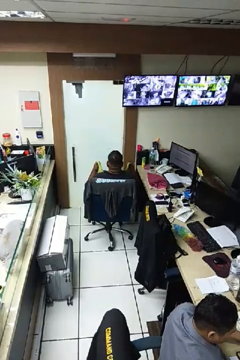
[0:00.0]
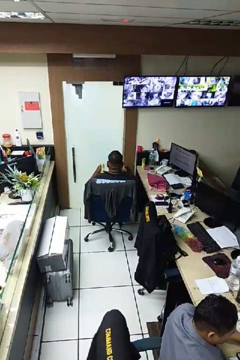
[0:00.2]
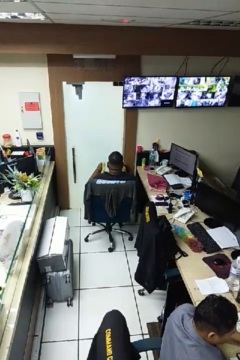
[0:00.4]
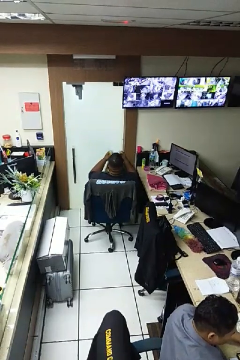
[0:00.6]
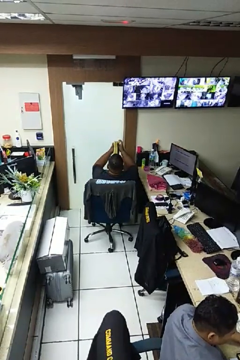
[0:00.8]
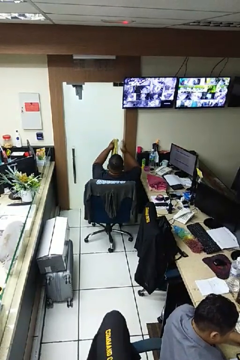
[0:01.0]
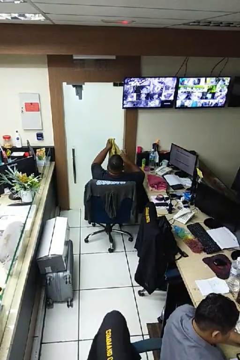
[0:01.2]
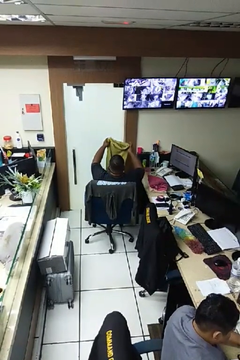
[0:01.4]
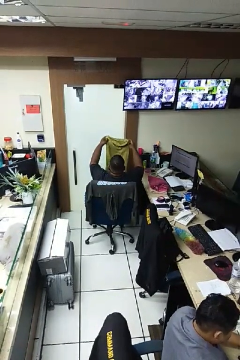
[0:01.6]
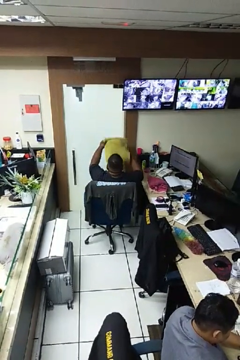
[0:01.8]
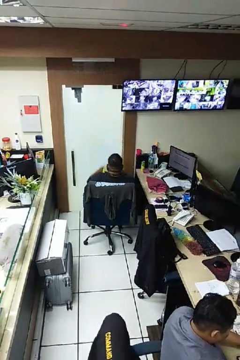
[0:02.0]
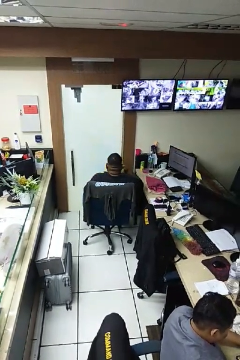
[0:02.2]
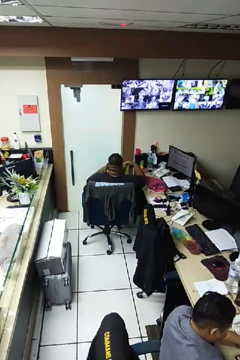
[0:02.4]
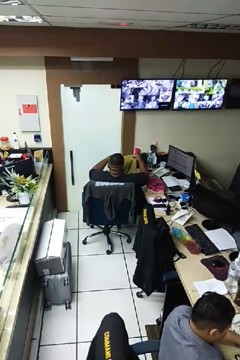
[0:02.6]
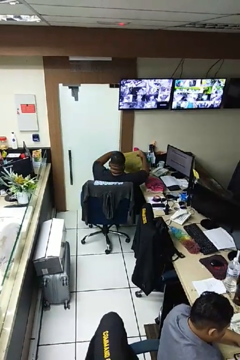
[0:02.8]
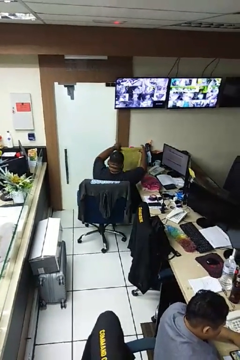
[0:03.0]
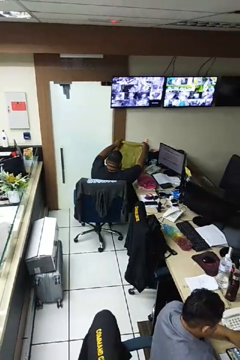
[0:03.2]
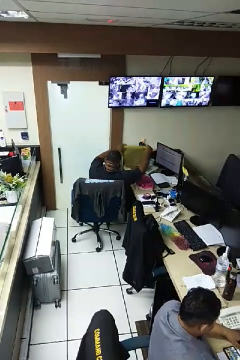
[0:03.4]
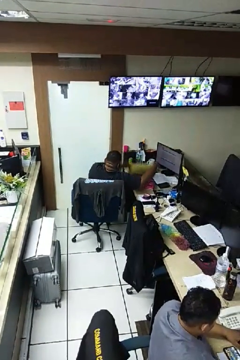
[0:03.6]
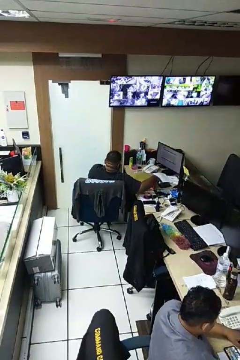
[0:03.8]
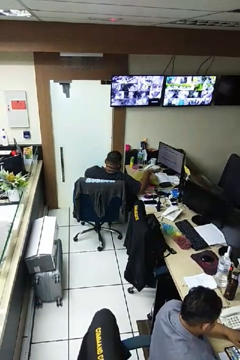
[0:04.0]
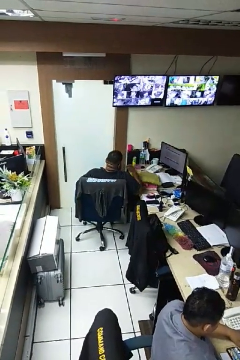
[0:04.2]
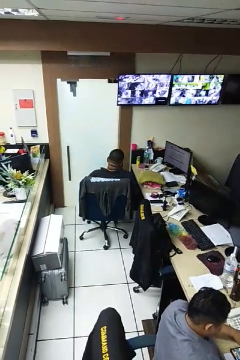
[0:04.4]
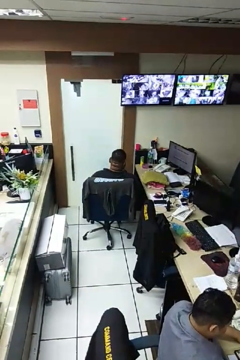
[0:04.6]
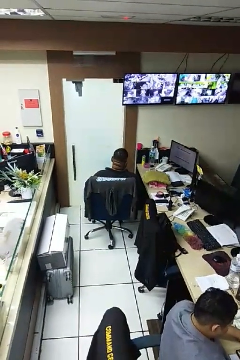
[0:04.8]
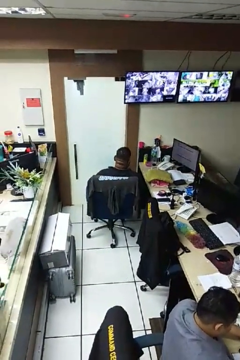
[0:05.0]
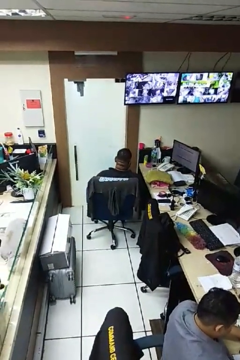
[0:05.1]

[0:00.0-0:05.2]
person folds towel

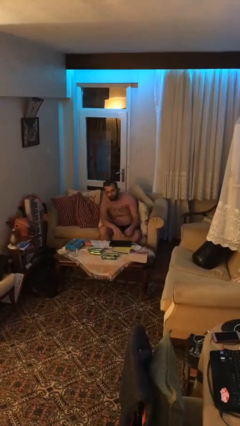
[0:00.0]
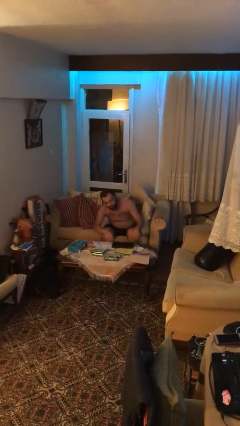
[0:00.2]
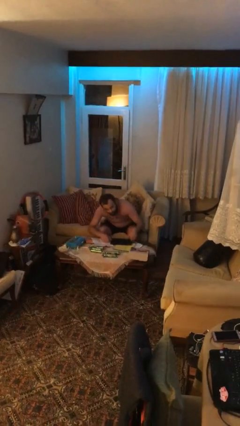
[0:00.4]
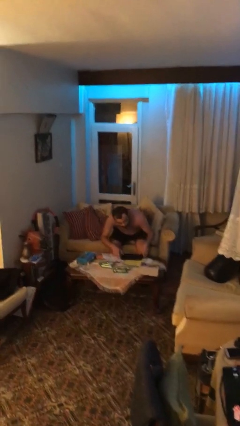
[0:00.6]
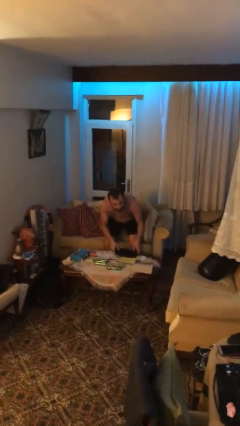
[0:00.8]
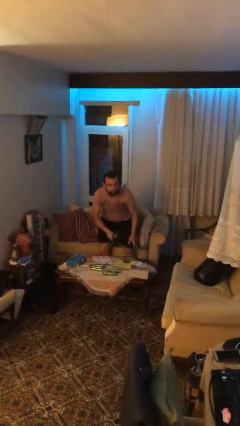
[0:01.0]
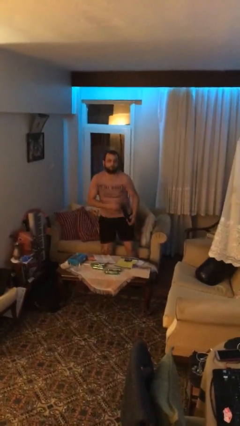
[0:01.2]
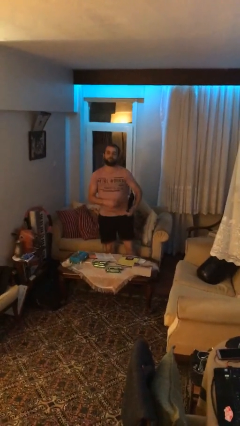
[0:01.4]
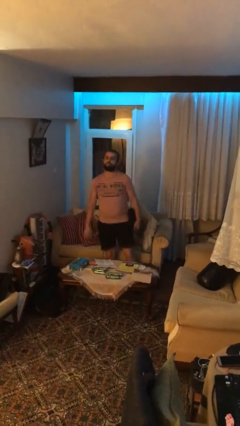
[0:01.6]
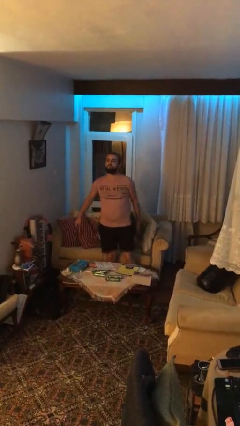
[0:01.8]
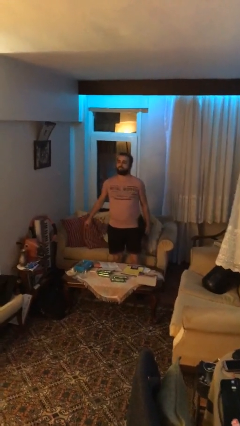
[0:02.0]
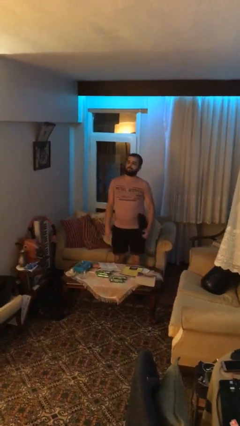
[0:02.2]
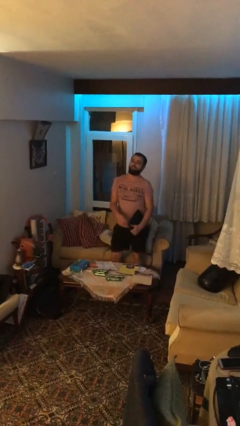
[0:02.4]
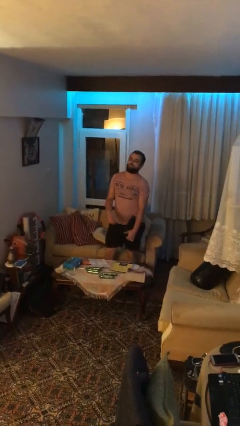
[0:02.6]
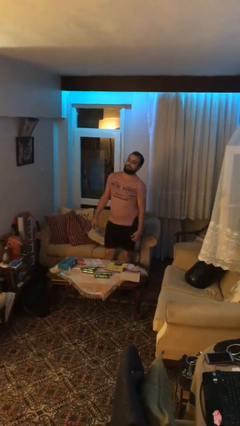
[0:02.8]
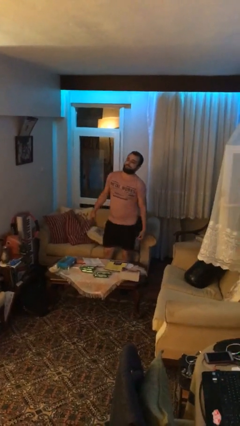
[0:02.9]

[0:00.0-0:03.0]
person stands up

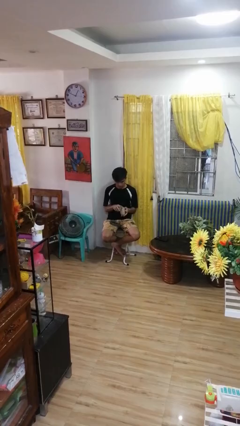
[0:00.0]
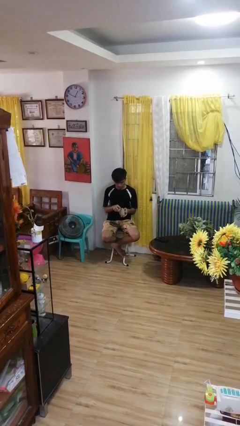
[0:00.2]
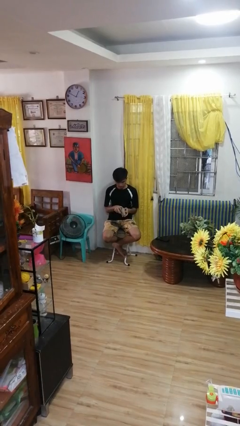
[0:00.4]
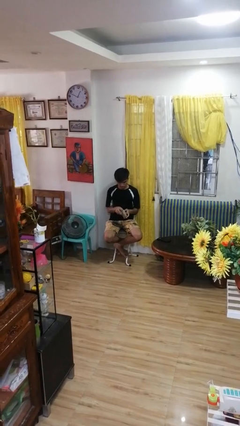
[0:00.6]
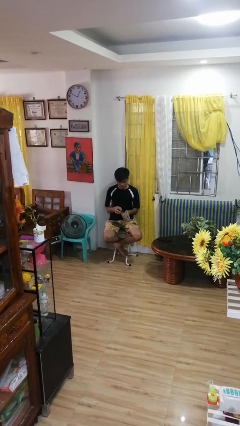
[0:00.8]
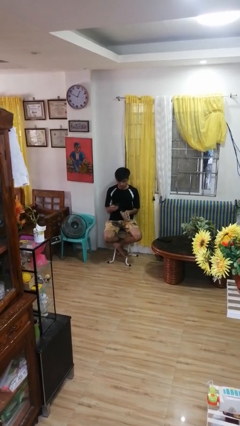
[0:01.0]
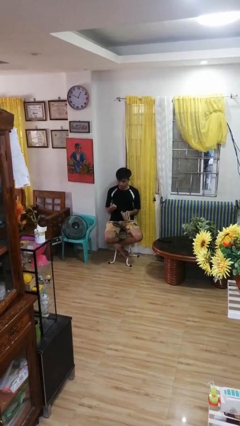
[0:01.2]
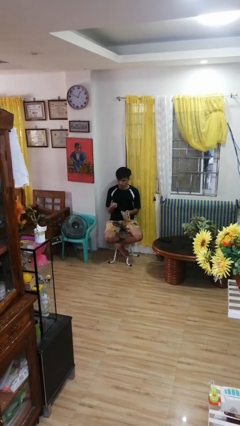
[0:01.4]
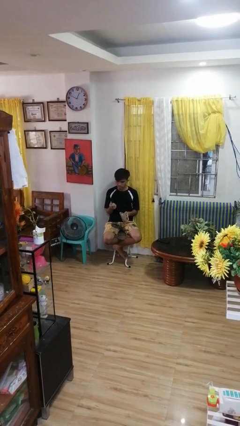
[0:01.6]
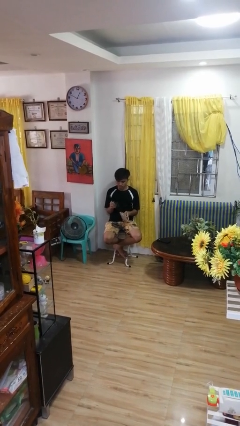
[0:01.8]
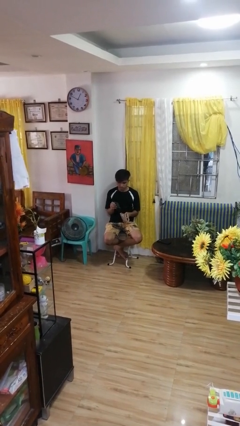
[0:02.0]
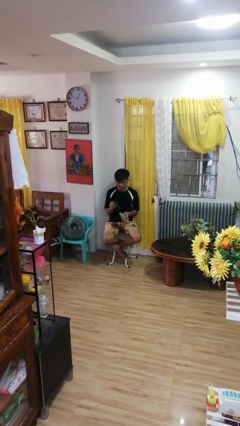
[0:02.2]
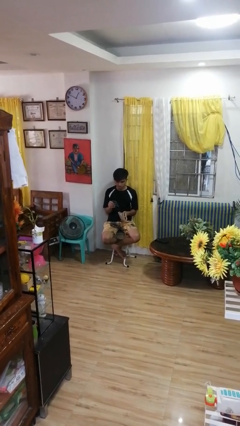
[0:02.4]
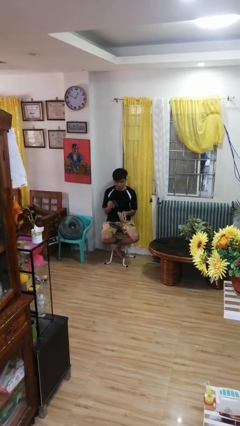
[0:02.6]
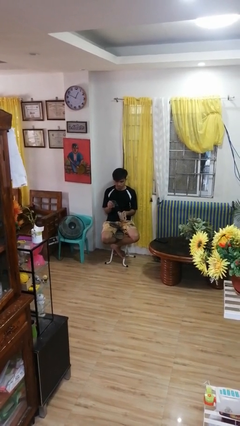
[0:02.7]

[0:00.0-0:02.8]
person takes object from purse

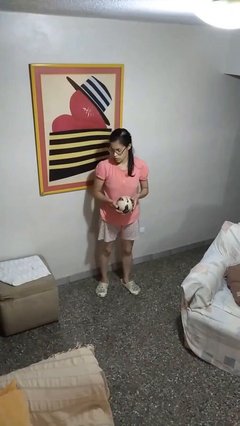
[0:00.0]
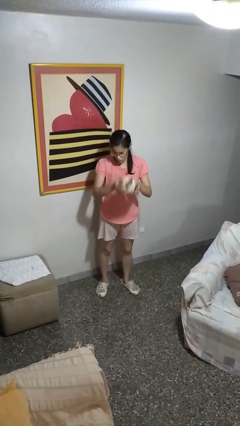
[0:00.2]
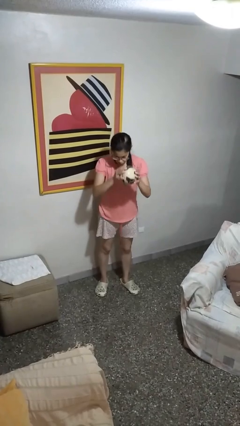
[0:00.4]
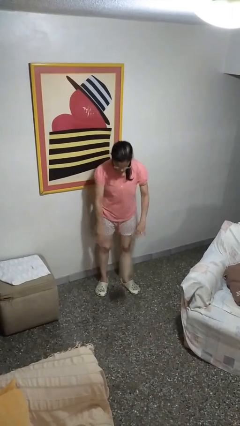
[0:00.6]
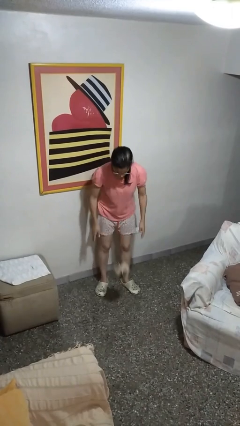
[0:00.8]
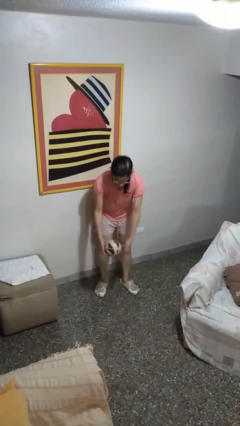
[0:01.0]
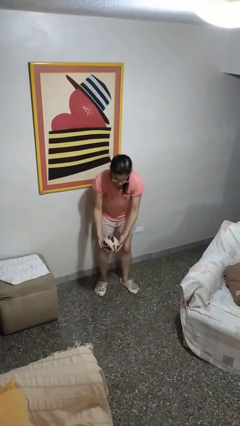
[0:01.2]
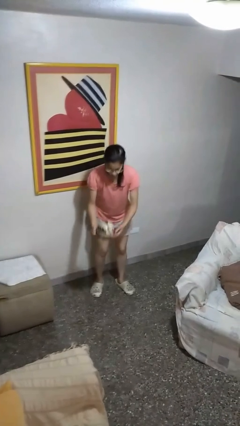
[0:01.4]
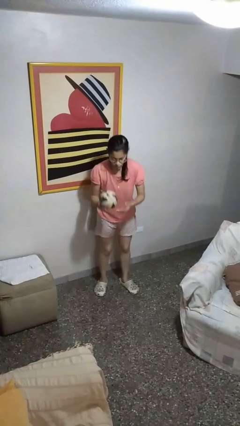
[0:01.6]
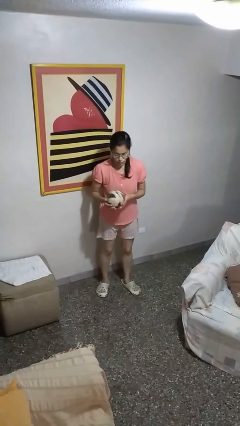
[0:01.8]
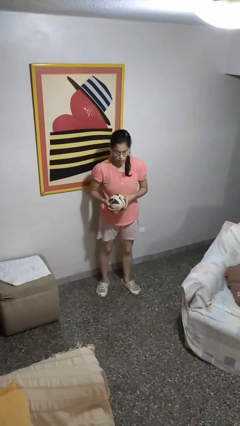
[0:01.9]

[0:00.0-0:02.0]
person bounces ball on floor

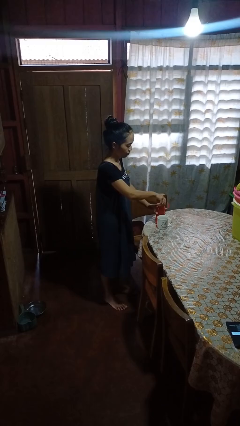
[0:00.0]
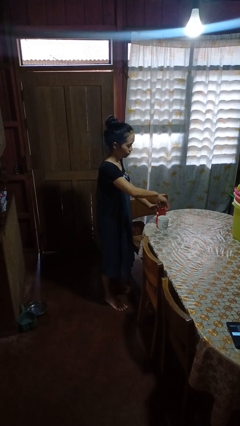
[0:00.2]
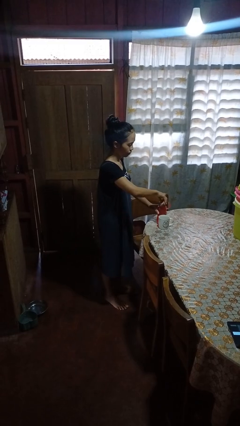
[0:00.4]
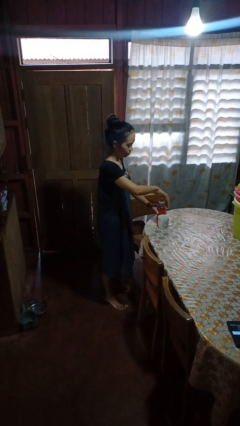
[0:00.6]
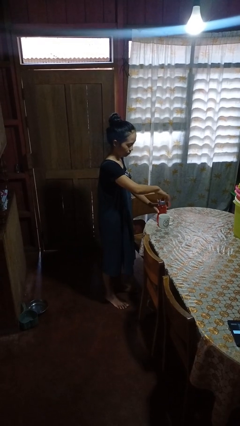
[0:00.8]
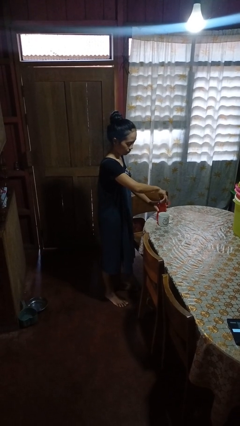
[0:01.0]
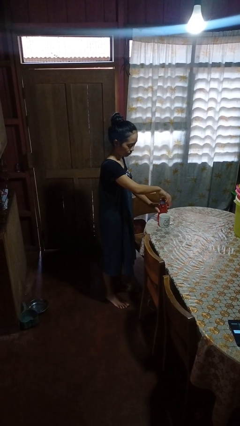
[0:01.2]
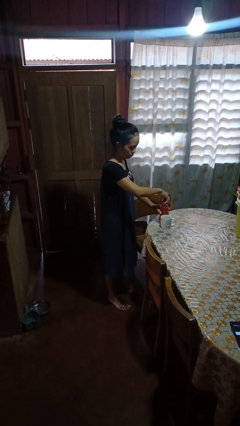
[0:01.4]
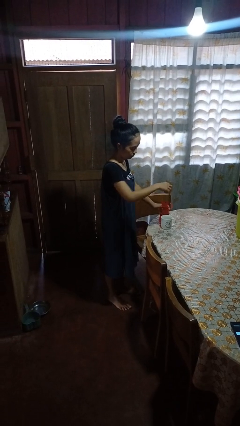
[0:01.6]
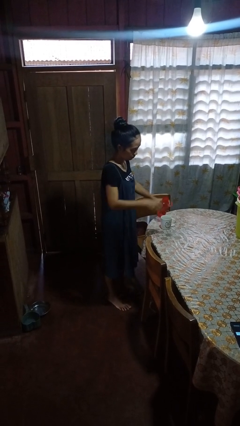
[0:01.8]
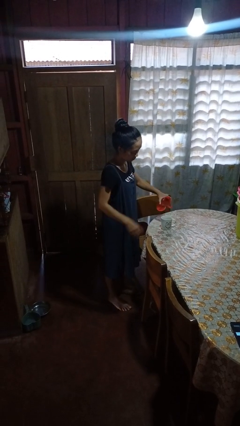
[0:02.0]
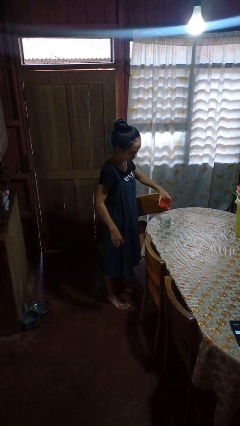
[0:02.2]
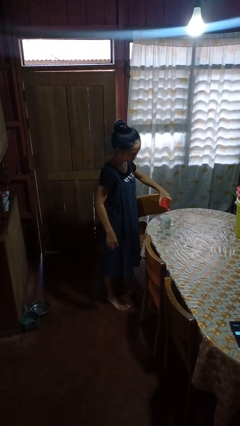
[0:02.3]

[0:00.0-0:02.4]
person unscrews lid from bottle

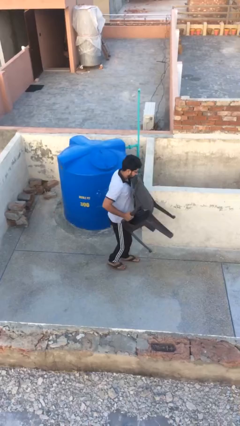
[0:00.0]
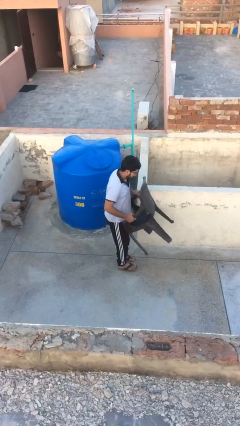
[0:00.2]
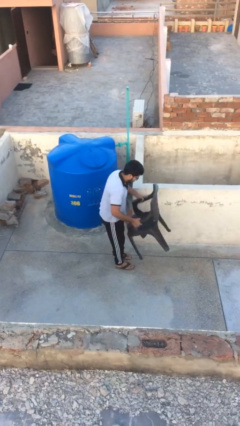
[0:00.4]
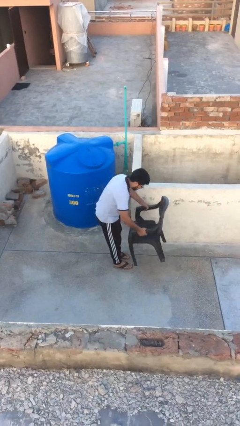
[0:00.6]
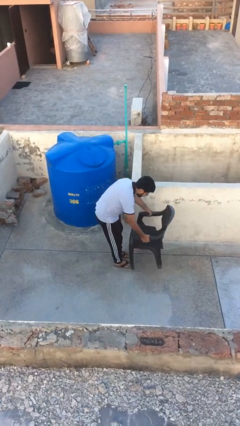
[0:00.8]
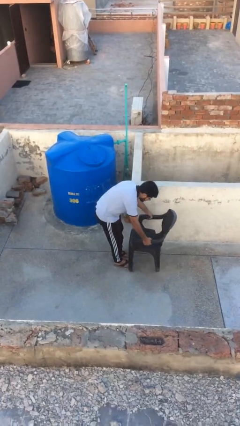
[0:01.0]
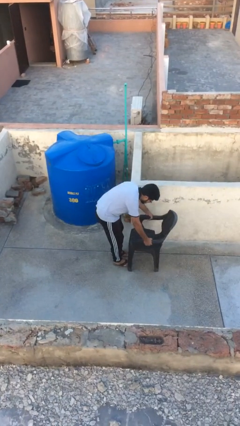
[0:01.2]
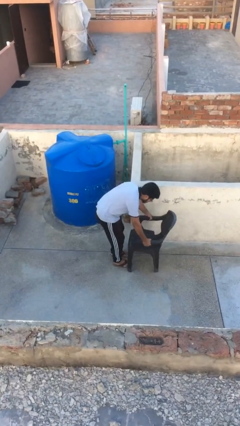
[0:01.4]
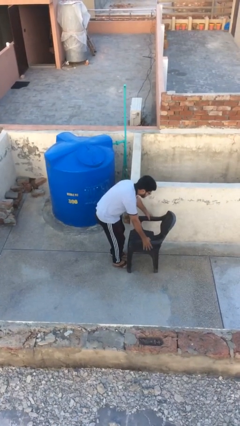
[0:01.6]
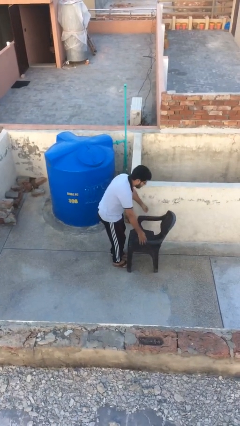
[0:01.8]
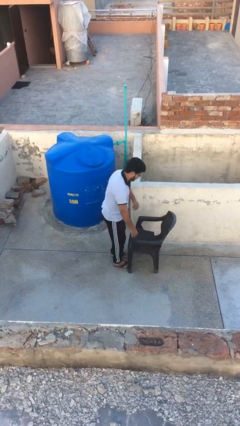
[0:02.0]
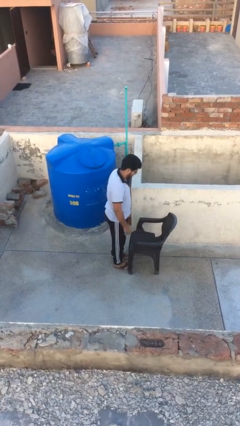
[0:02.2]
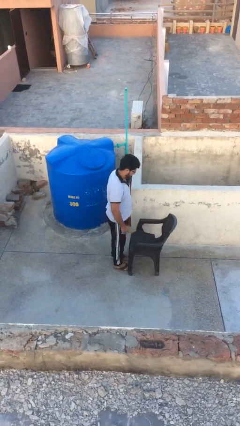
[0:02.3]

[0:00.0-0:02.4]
person puts down object on floor
